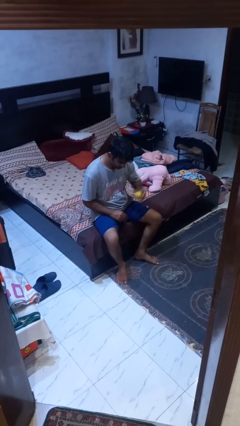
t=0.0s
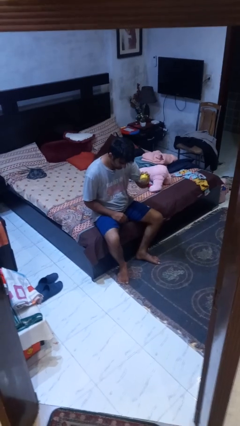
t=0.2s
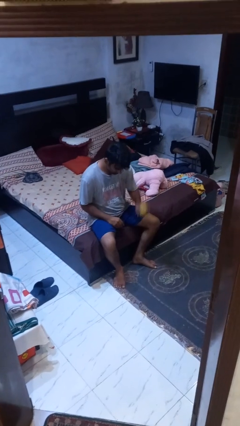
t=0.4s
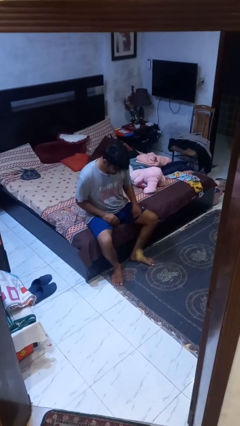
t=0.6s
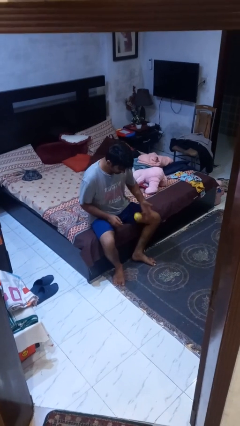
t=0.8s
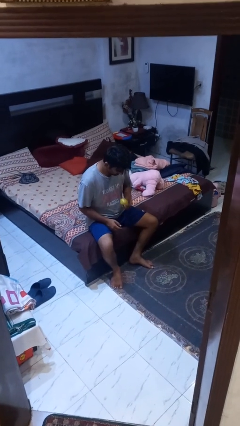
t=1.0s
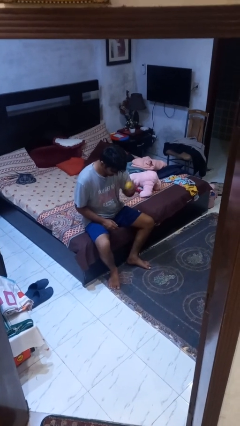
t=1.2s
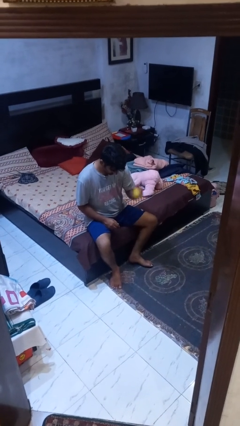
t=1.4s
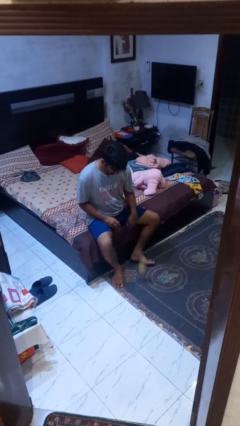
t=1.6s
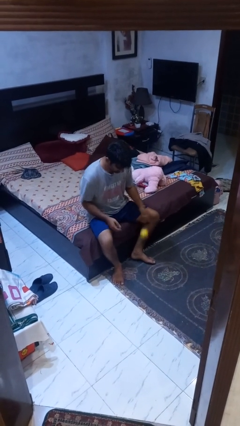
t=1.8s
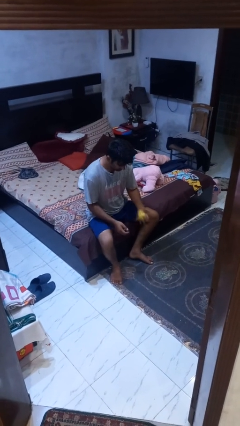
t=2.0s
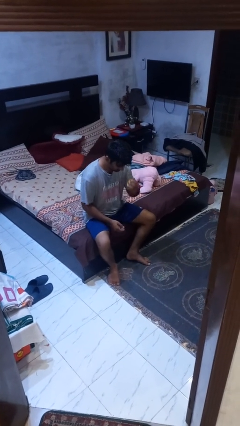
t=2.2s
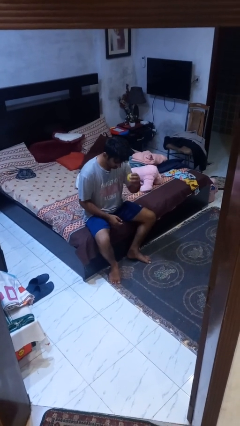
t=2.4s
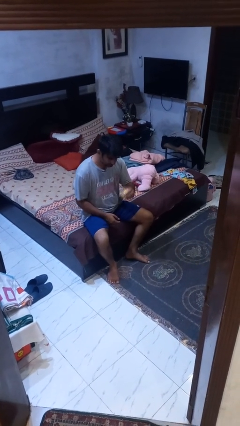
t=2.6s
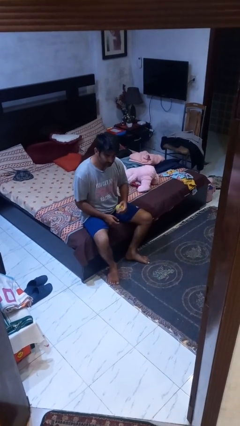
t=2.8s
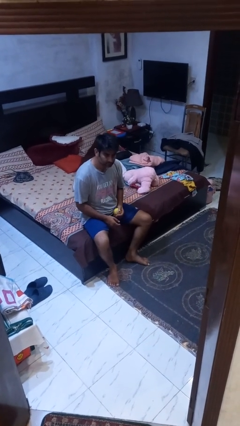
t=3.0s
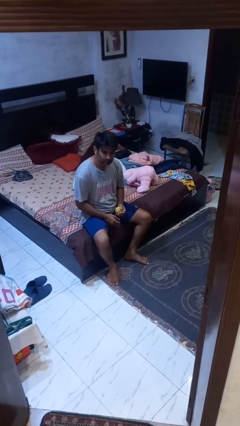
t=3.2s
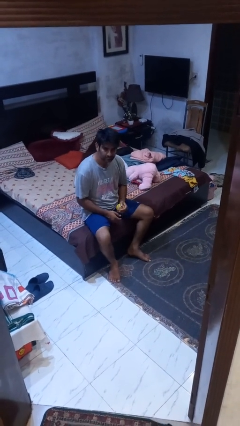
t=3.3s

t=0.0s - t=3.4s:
person bounces ball on floor

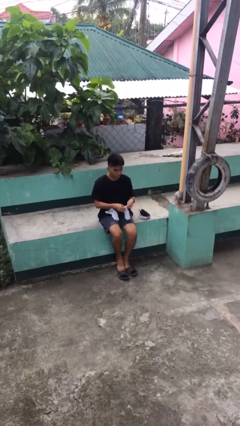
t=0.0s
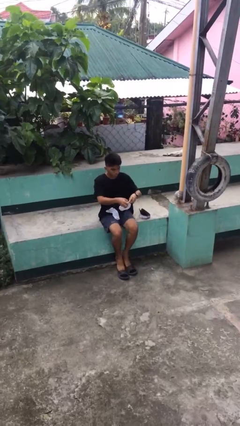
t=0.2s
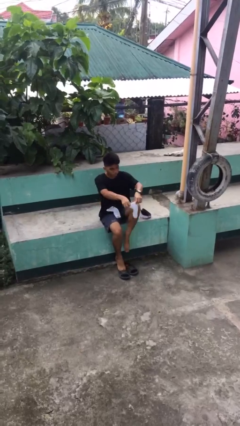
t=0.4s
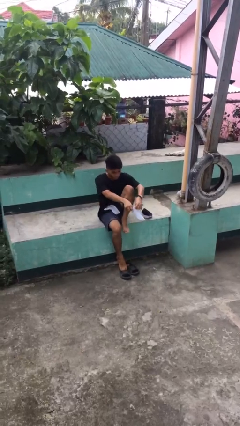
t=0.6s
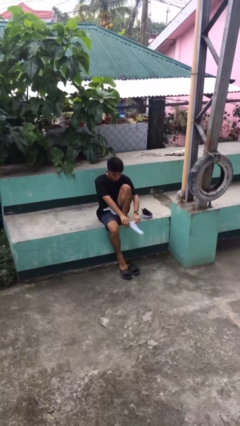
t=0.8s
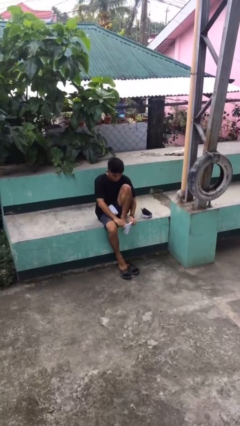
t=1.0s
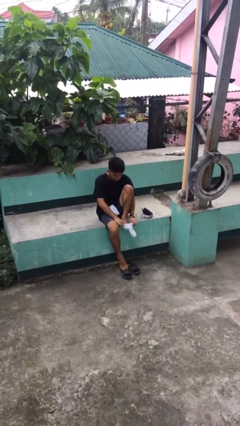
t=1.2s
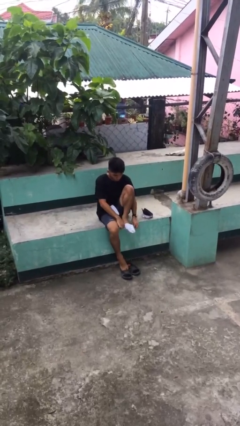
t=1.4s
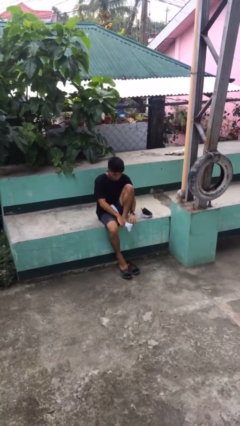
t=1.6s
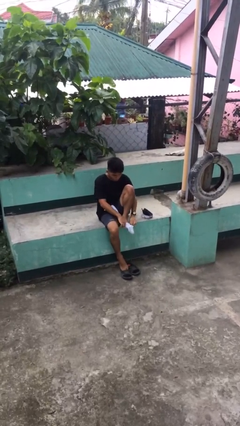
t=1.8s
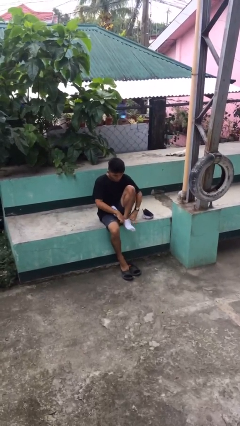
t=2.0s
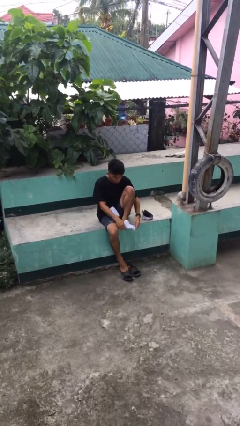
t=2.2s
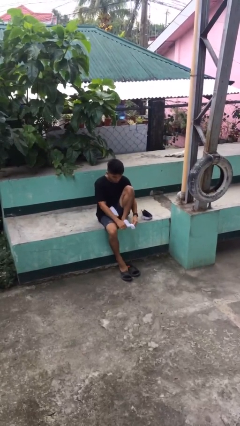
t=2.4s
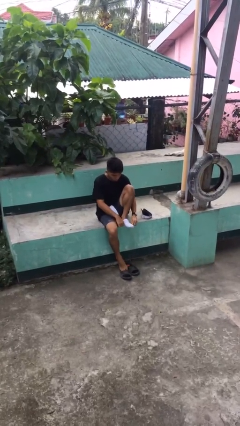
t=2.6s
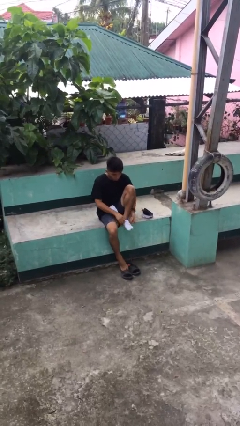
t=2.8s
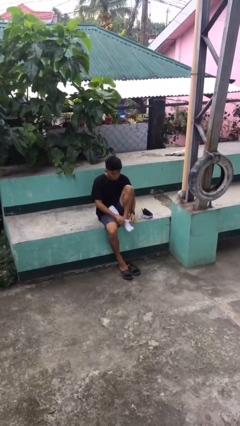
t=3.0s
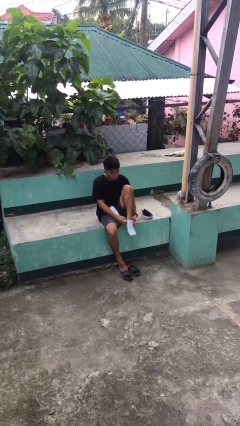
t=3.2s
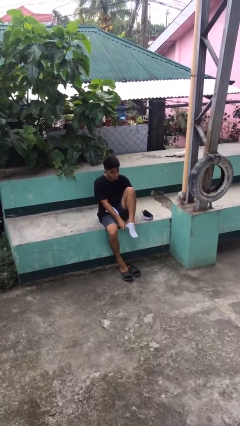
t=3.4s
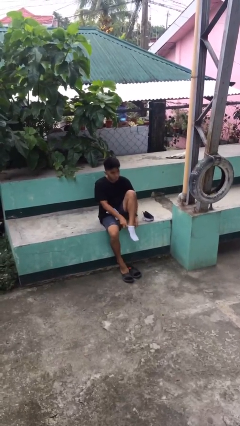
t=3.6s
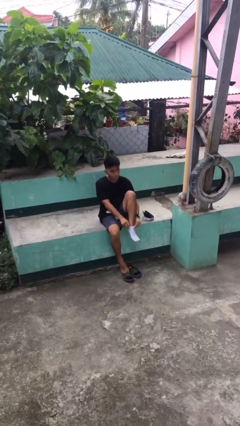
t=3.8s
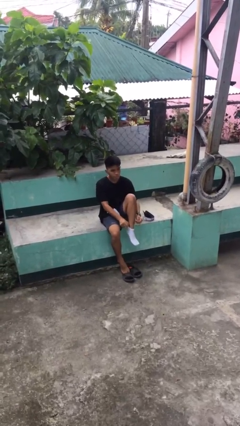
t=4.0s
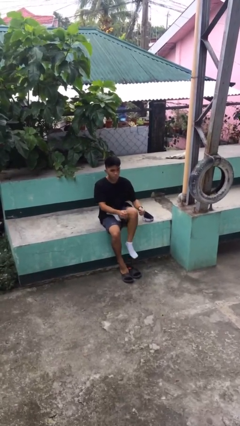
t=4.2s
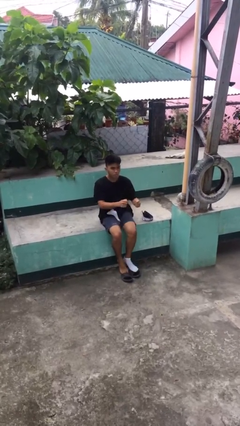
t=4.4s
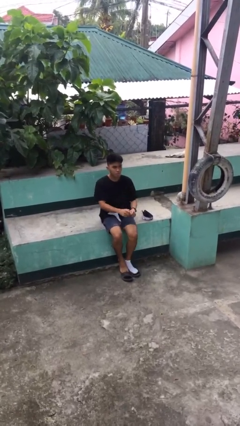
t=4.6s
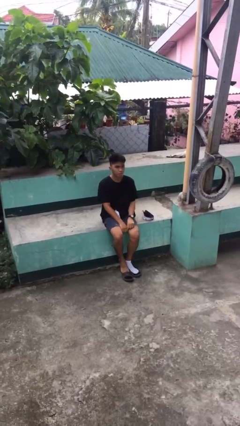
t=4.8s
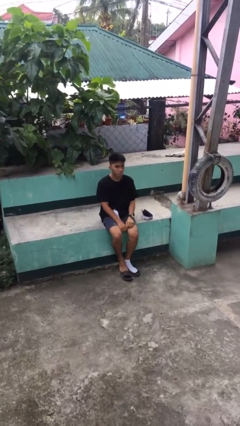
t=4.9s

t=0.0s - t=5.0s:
person puts on socks

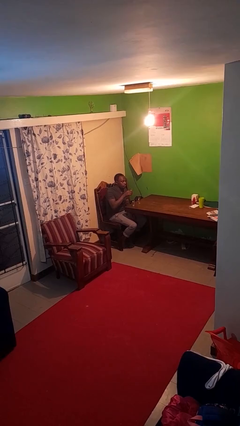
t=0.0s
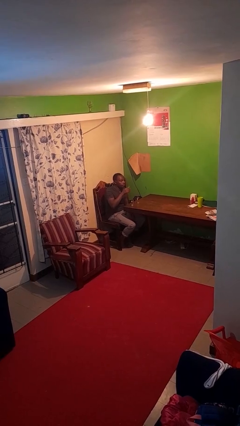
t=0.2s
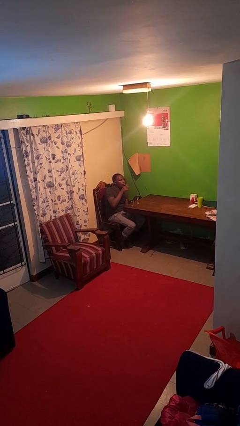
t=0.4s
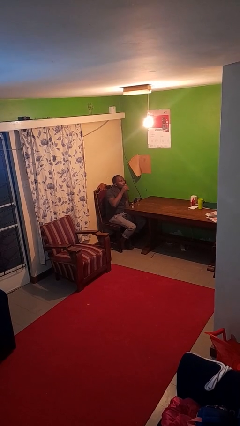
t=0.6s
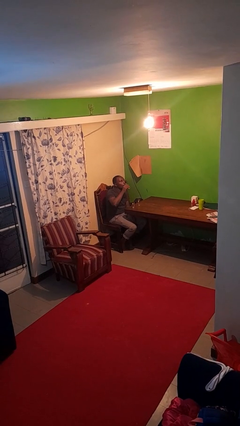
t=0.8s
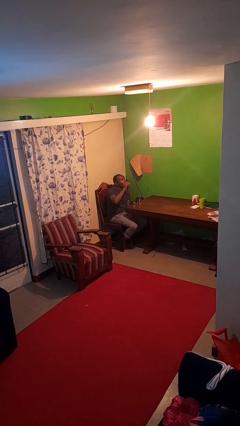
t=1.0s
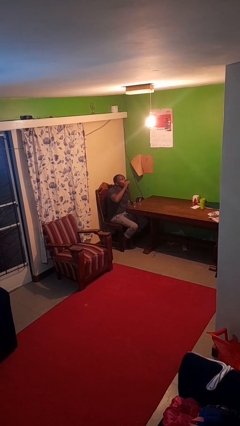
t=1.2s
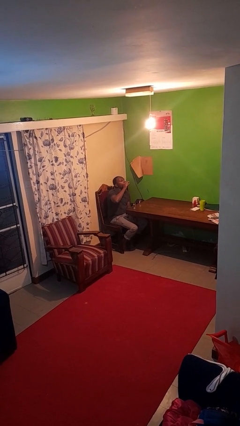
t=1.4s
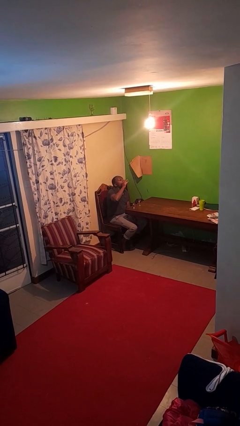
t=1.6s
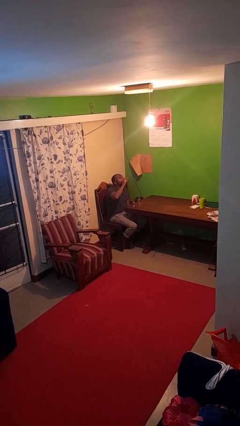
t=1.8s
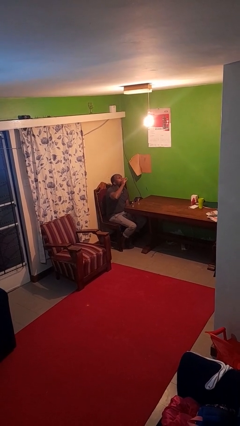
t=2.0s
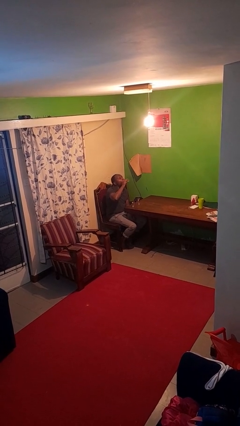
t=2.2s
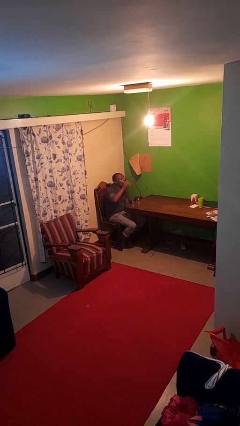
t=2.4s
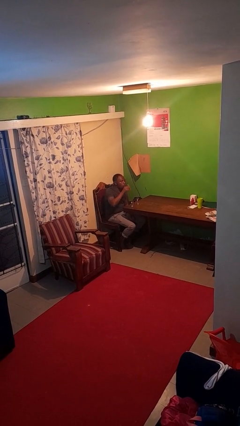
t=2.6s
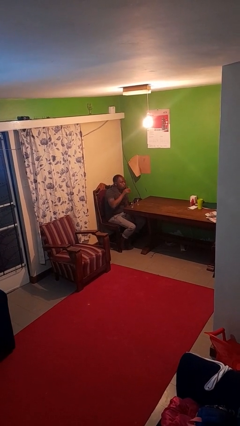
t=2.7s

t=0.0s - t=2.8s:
person drinks from shotglass

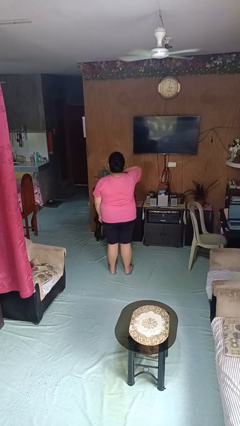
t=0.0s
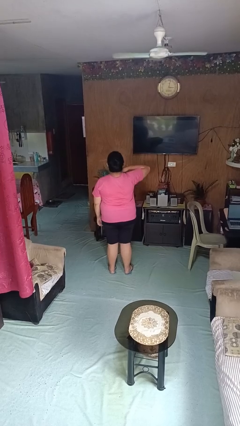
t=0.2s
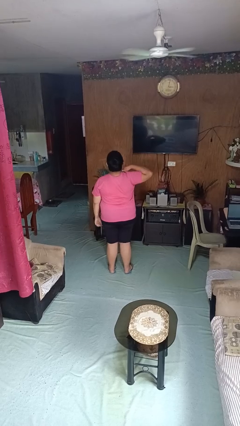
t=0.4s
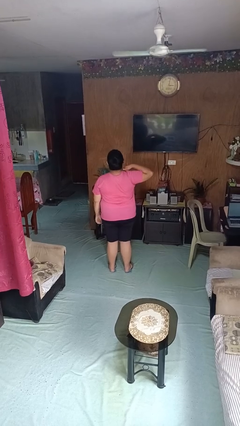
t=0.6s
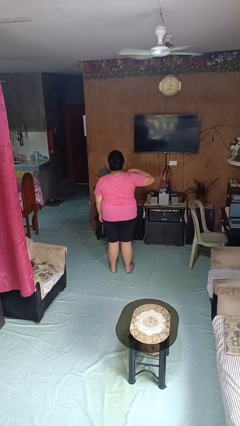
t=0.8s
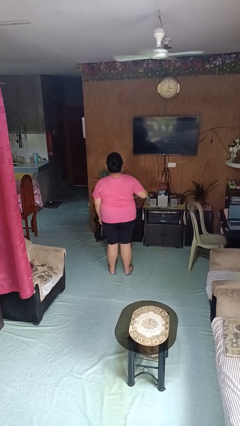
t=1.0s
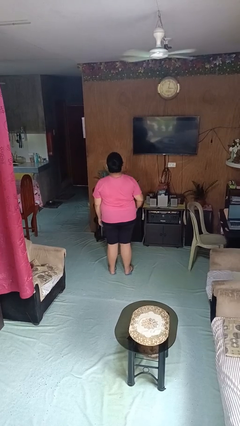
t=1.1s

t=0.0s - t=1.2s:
person gestures cut

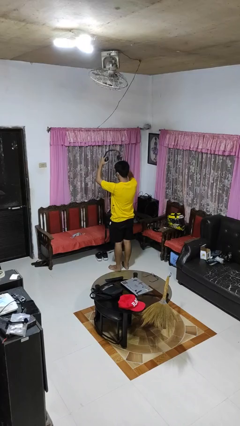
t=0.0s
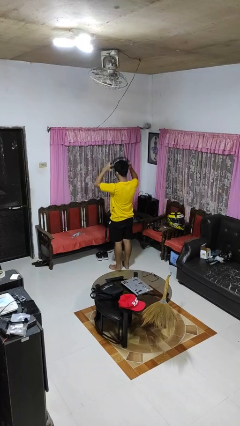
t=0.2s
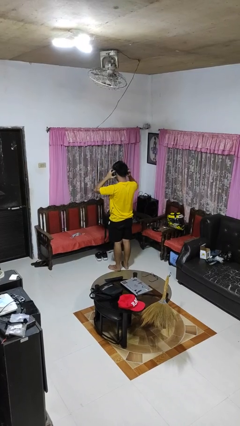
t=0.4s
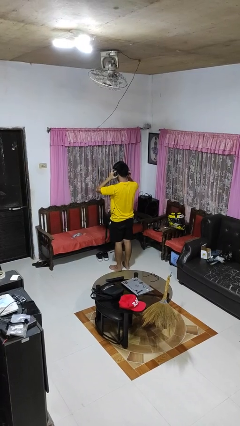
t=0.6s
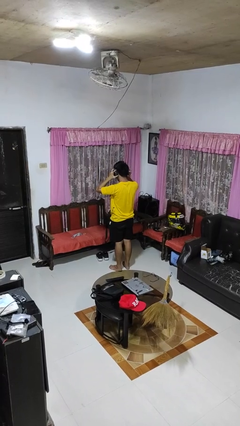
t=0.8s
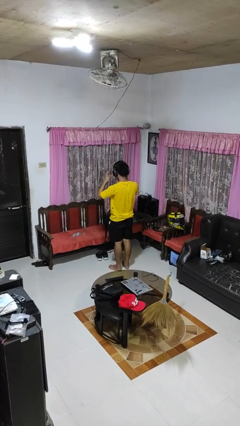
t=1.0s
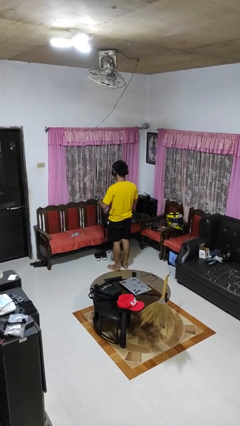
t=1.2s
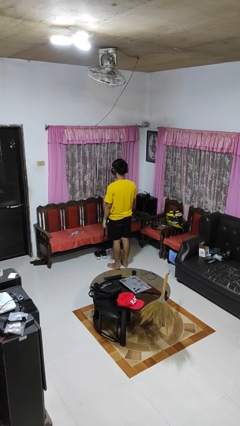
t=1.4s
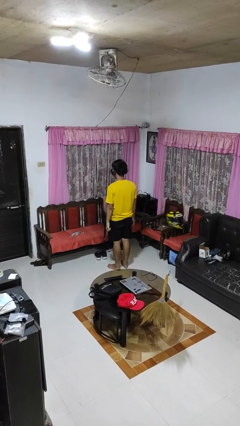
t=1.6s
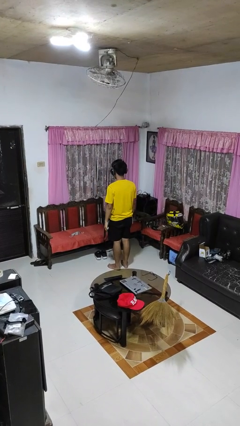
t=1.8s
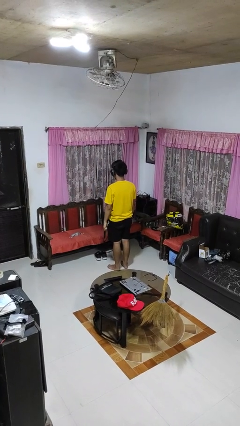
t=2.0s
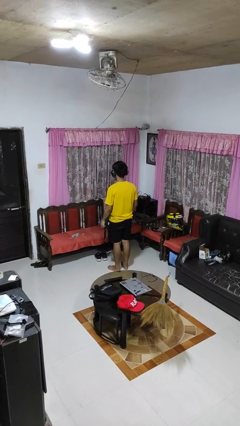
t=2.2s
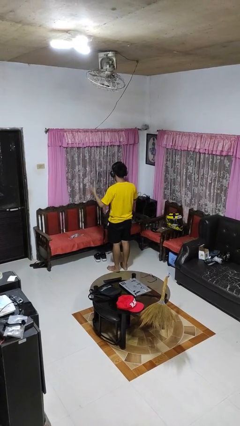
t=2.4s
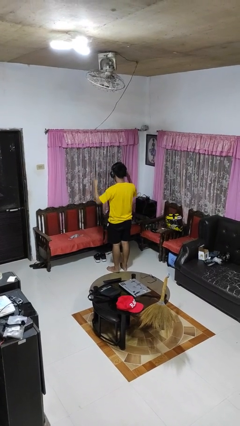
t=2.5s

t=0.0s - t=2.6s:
person puts on headphones

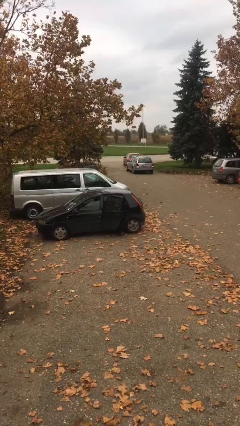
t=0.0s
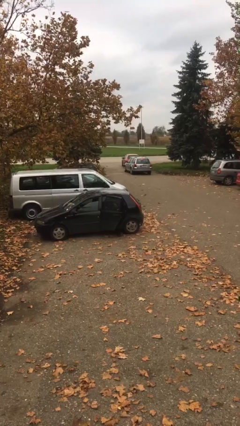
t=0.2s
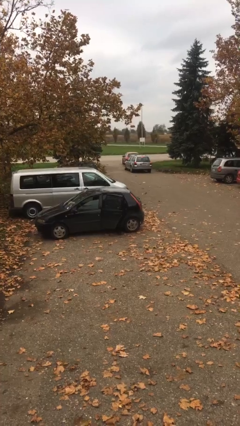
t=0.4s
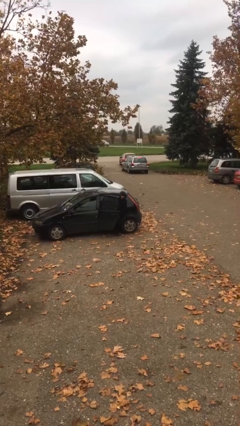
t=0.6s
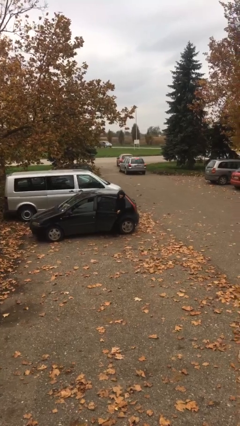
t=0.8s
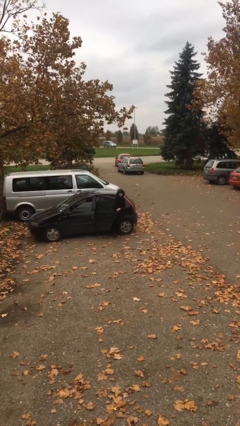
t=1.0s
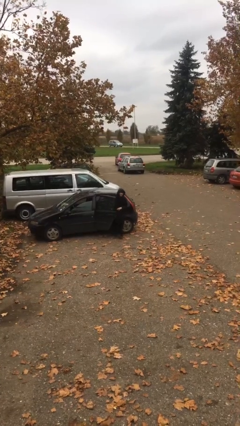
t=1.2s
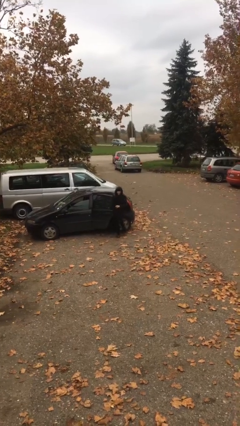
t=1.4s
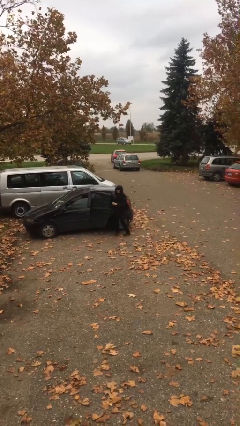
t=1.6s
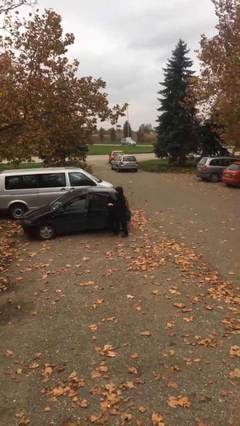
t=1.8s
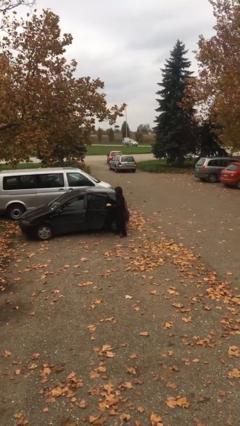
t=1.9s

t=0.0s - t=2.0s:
person exits car
